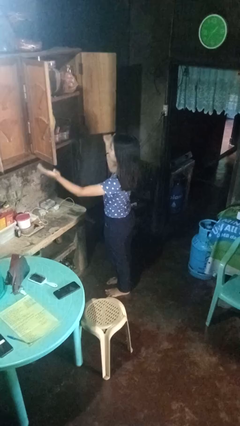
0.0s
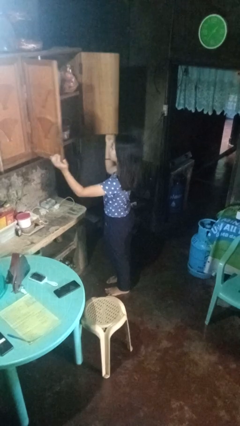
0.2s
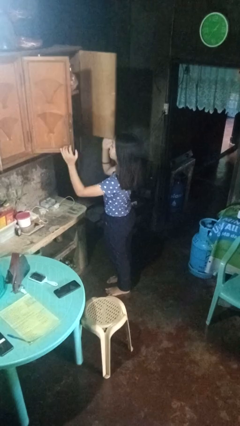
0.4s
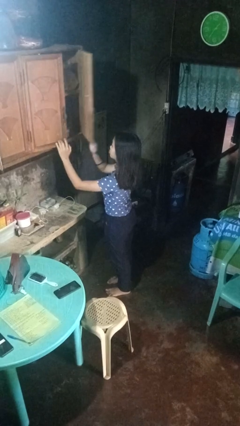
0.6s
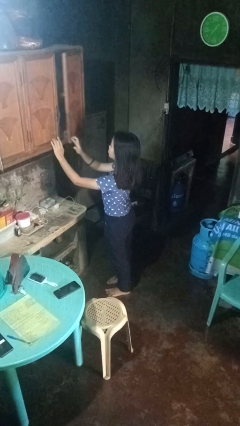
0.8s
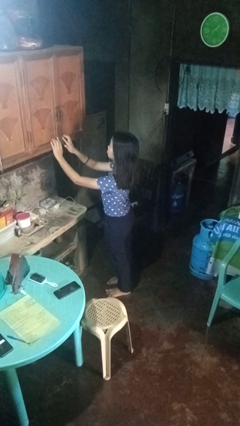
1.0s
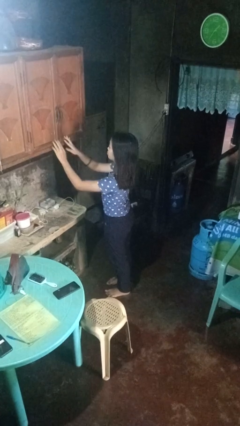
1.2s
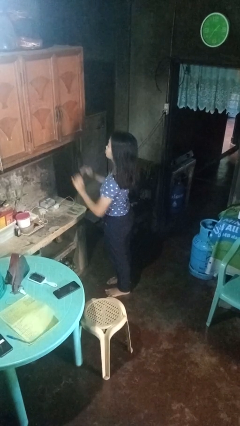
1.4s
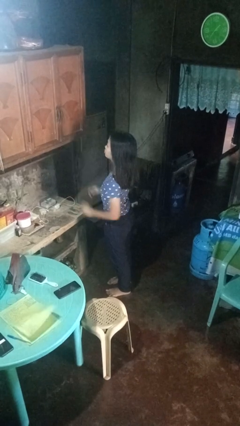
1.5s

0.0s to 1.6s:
person closes cabinet

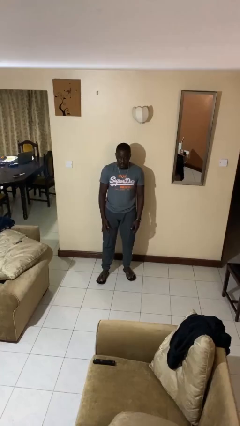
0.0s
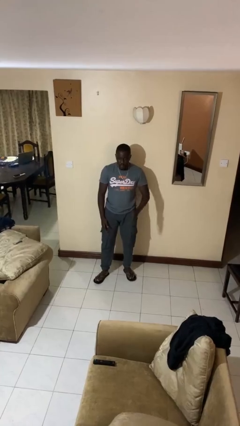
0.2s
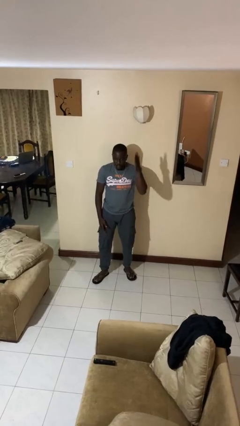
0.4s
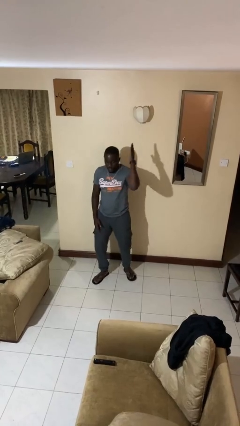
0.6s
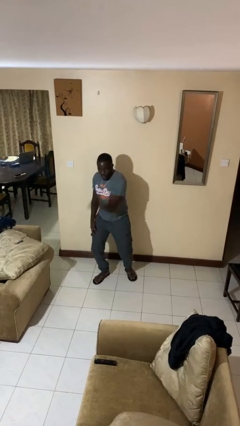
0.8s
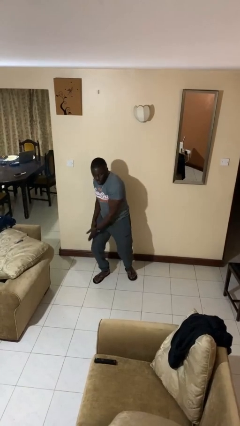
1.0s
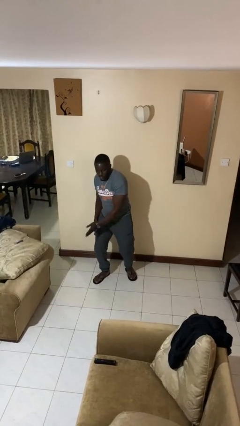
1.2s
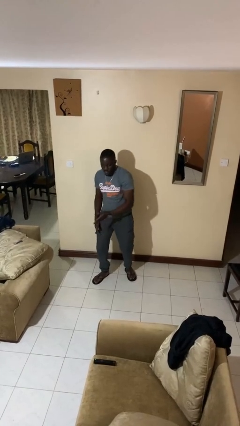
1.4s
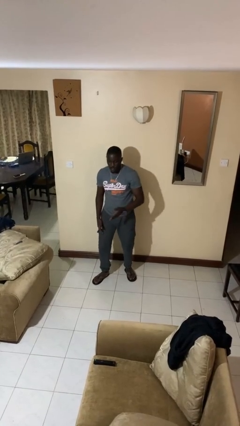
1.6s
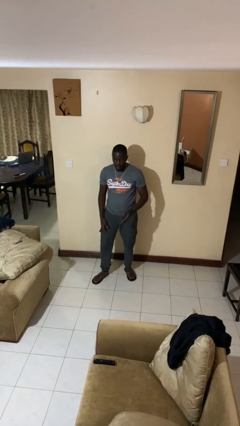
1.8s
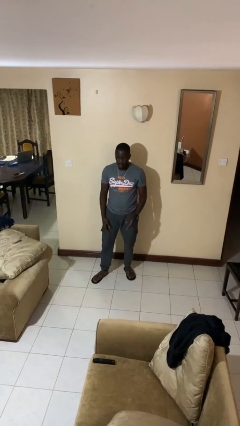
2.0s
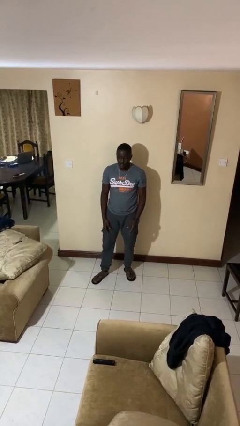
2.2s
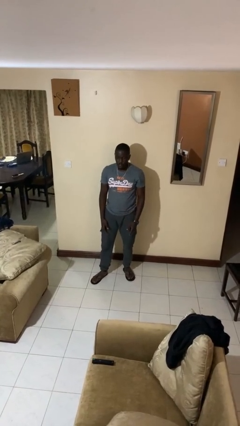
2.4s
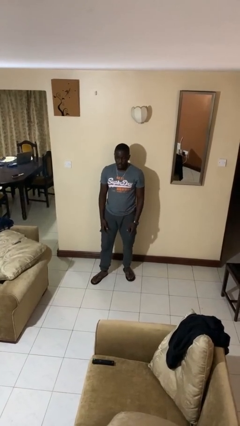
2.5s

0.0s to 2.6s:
person karate chop

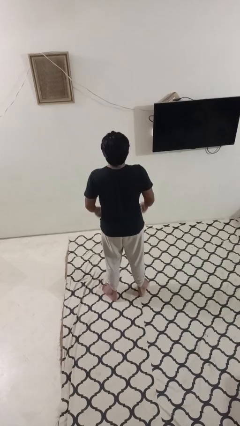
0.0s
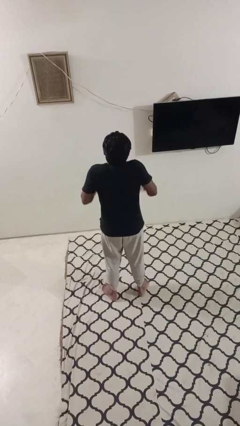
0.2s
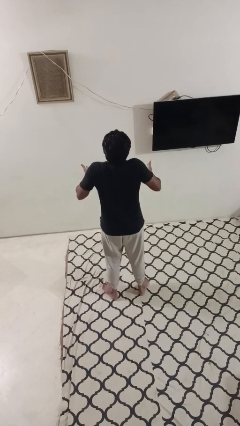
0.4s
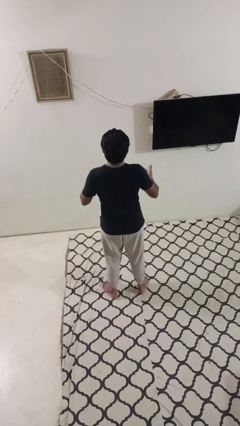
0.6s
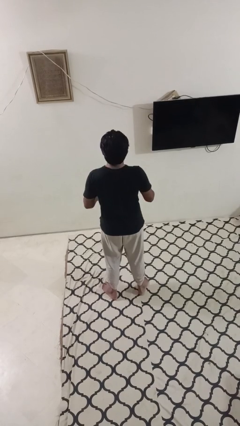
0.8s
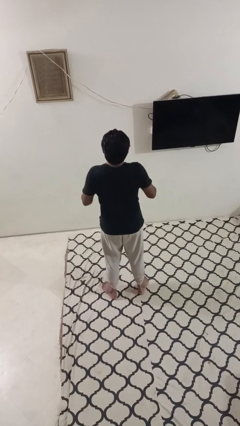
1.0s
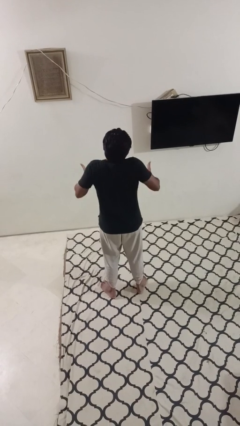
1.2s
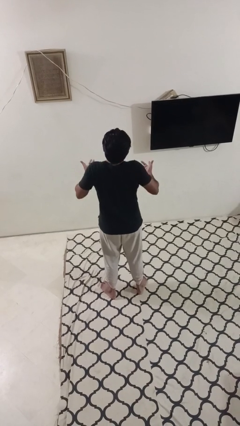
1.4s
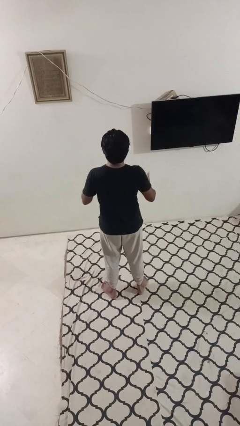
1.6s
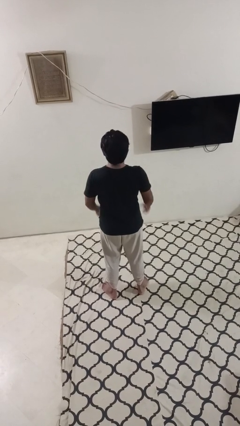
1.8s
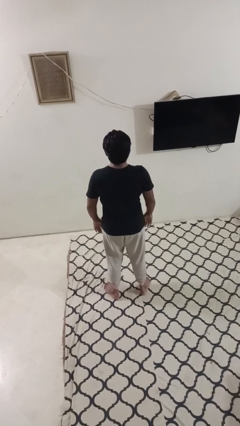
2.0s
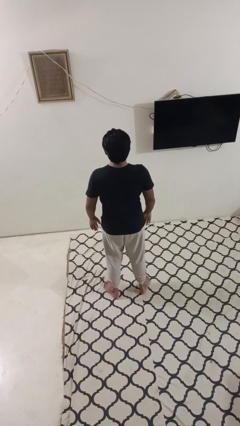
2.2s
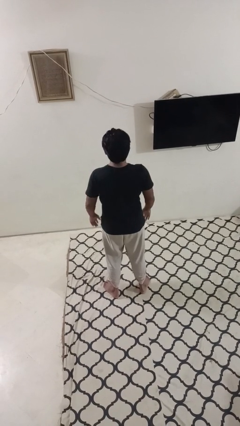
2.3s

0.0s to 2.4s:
person shrugs

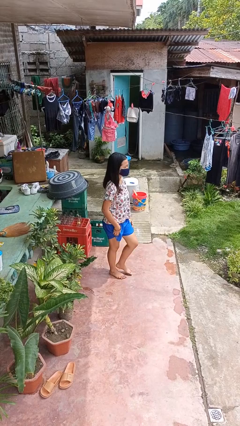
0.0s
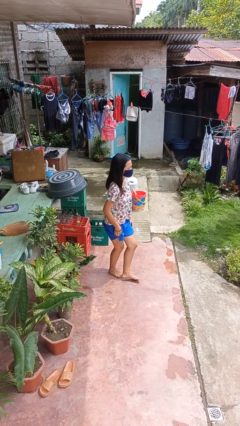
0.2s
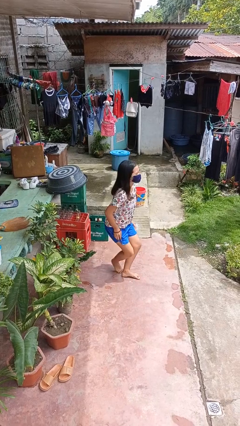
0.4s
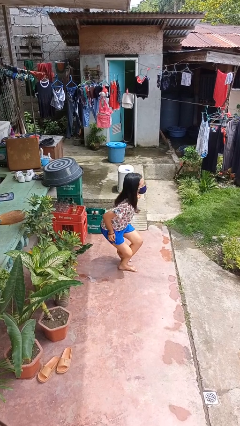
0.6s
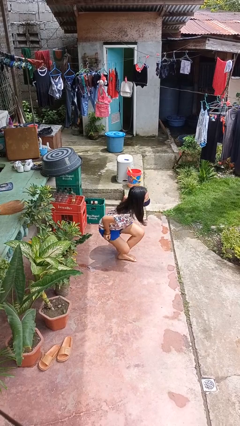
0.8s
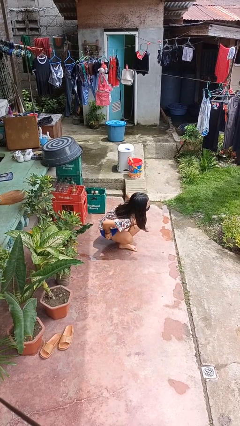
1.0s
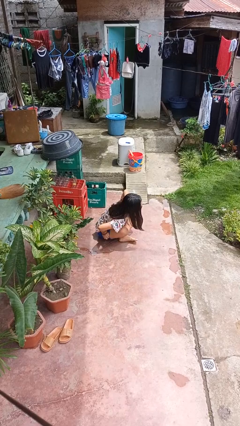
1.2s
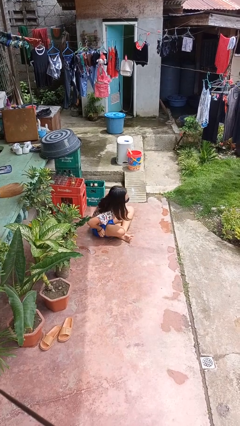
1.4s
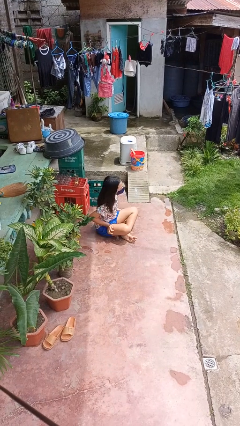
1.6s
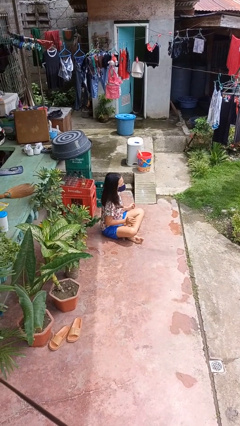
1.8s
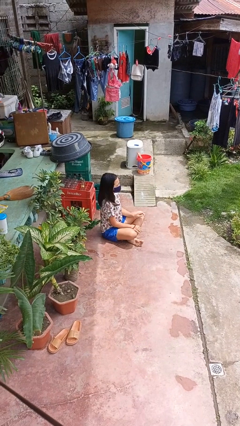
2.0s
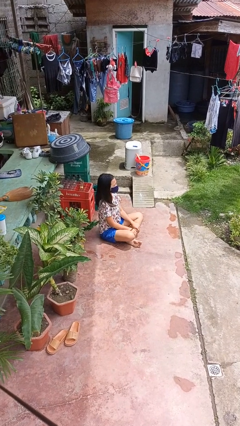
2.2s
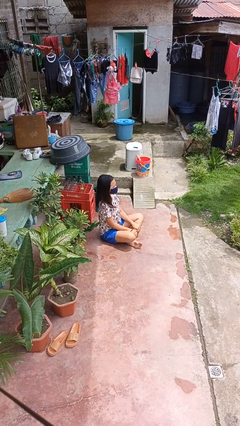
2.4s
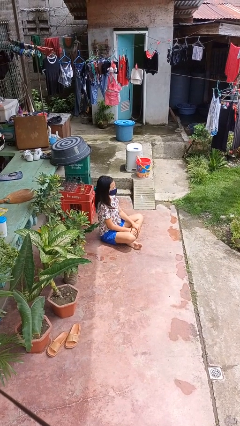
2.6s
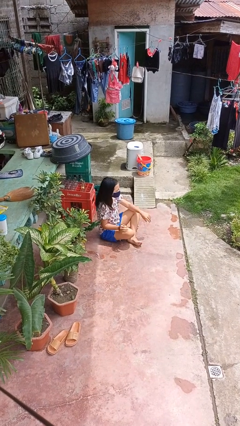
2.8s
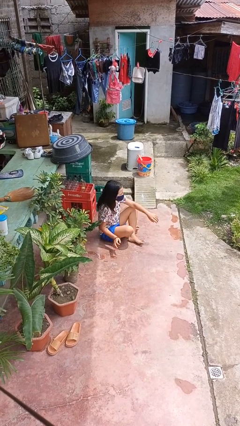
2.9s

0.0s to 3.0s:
person sits crisscross

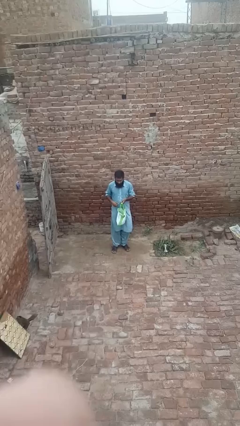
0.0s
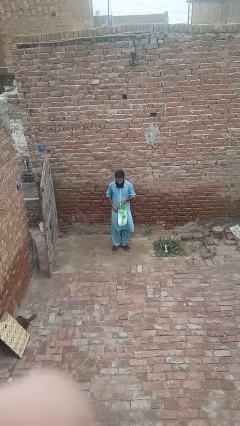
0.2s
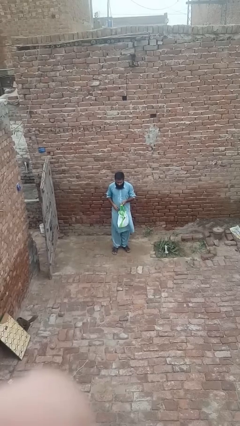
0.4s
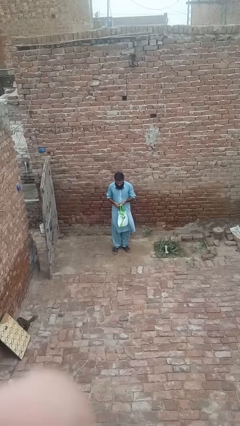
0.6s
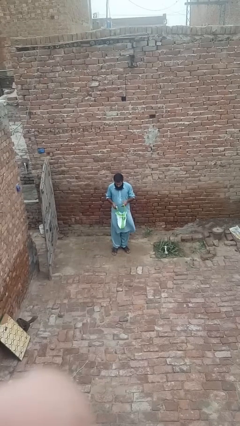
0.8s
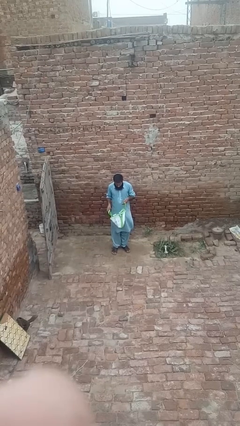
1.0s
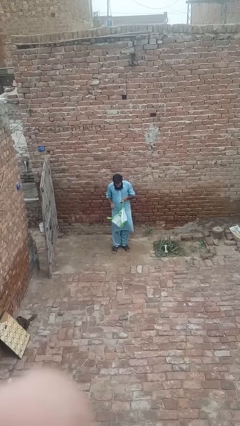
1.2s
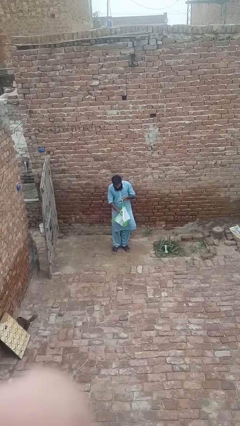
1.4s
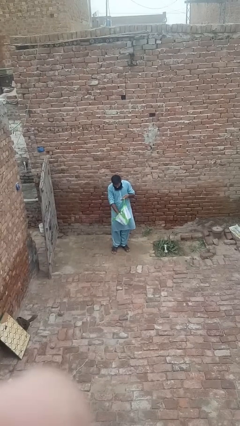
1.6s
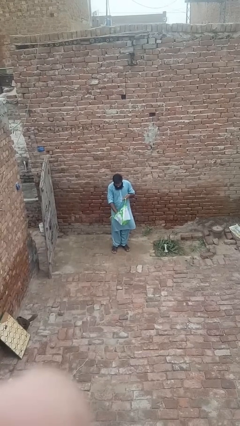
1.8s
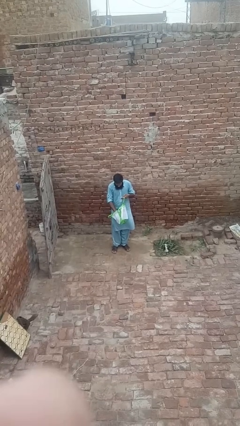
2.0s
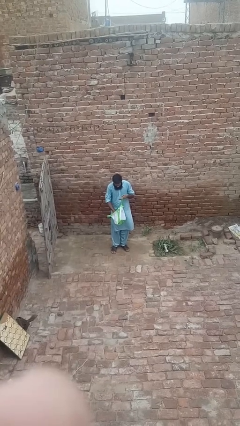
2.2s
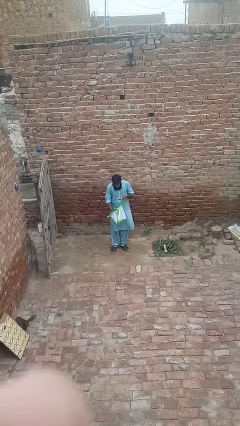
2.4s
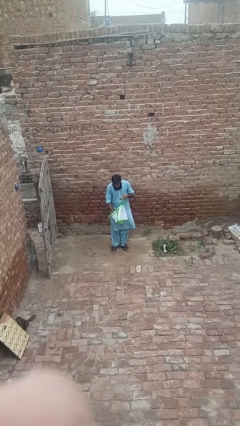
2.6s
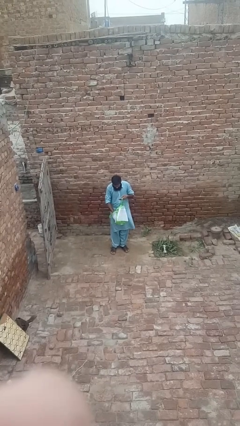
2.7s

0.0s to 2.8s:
person searches in bag

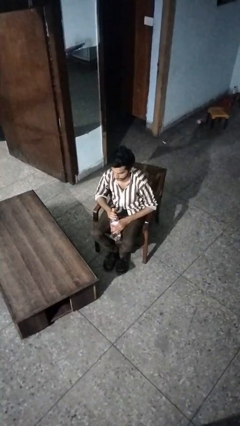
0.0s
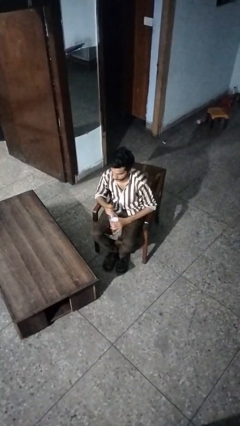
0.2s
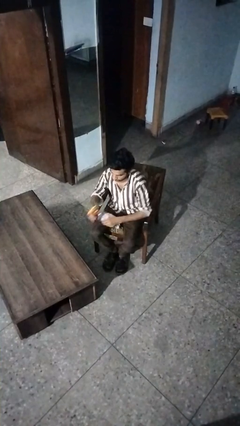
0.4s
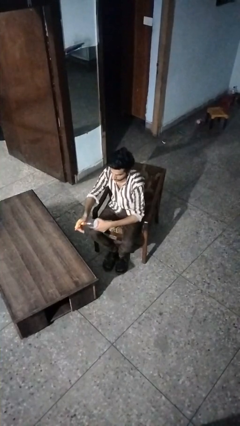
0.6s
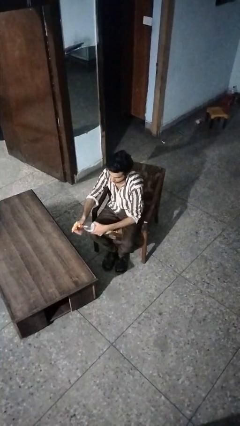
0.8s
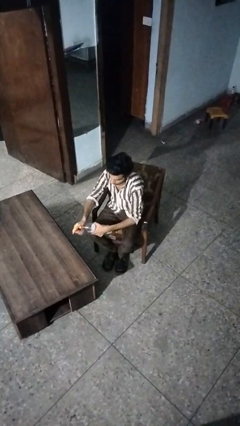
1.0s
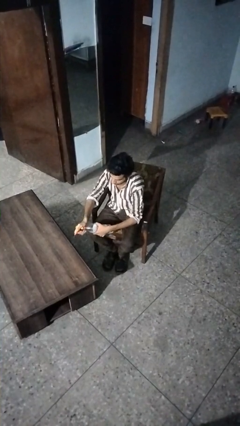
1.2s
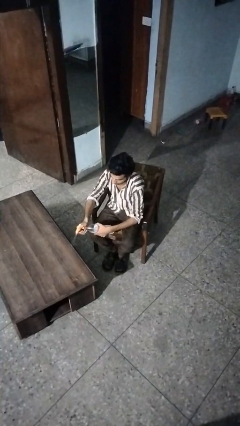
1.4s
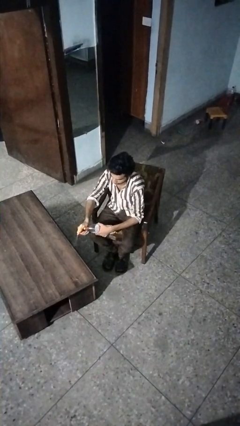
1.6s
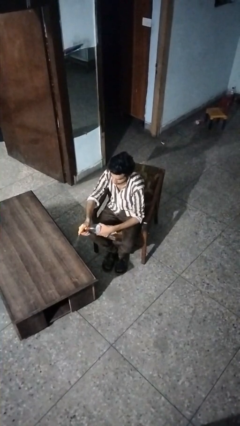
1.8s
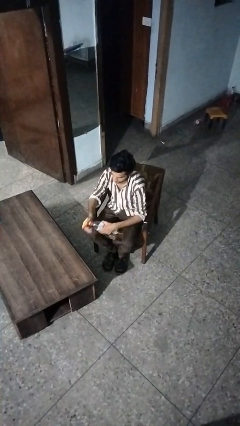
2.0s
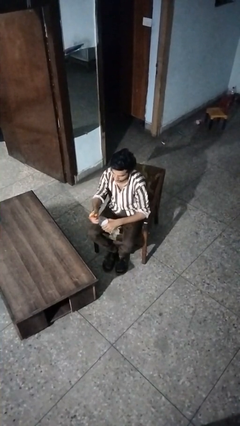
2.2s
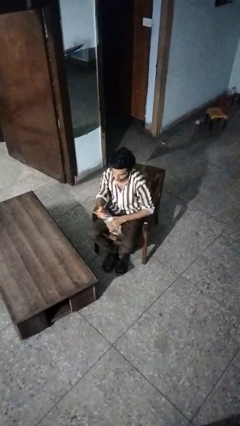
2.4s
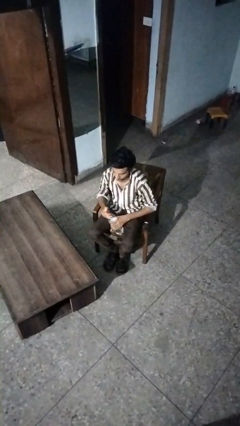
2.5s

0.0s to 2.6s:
person sprays from bottle

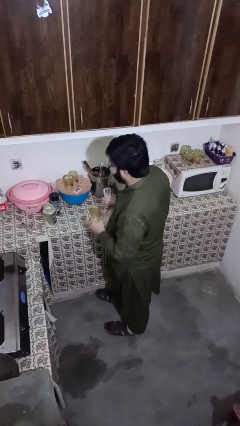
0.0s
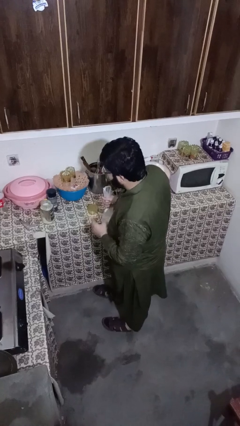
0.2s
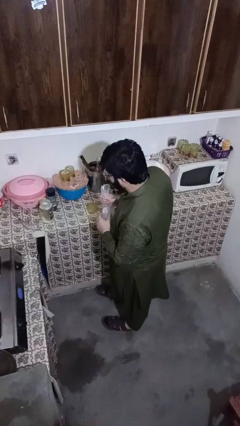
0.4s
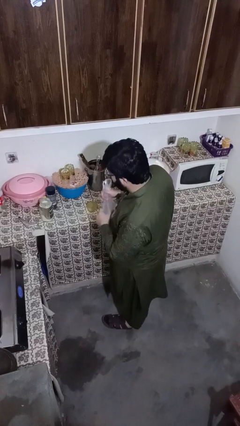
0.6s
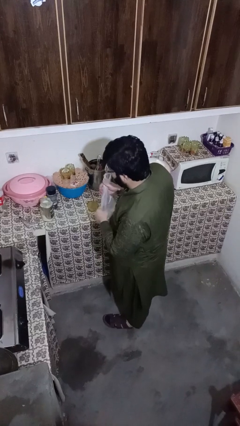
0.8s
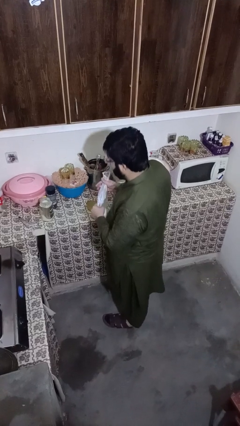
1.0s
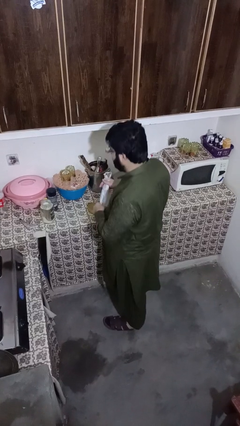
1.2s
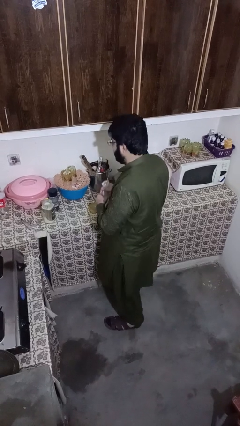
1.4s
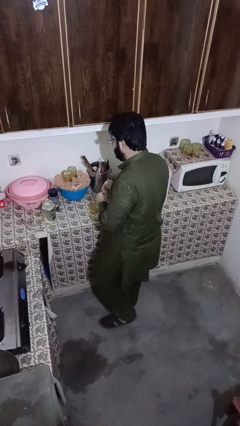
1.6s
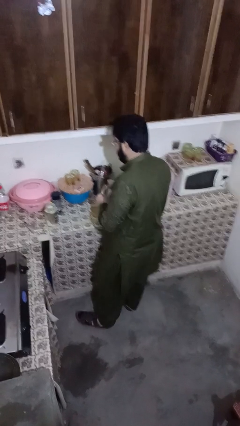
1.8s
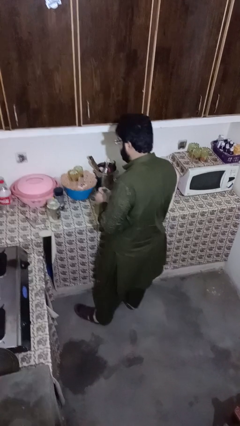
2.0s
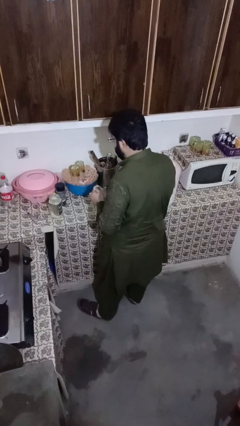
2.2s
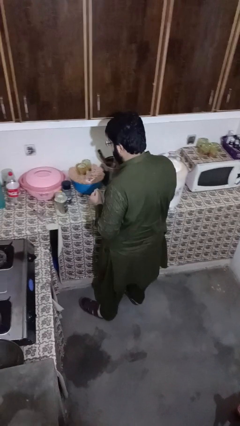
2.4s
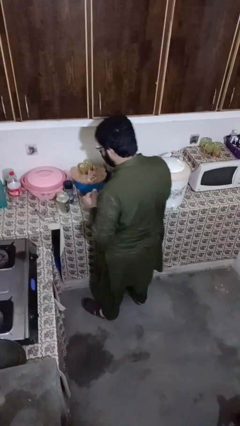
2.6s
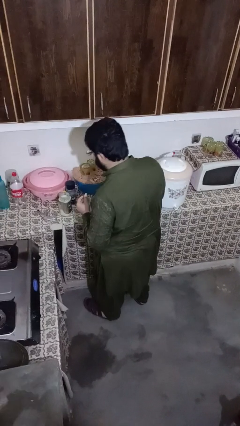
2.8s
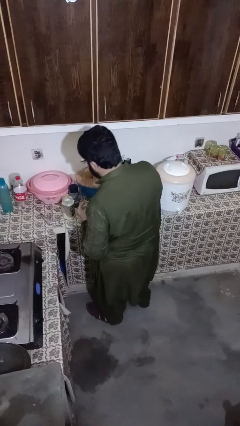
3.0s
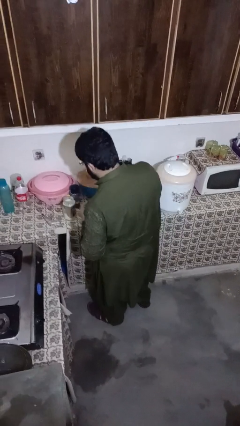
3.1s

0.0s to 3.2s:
person pours into bowl
